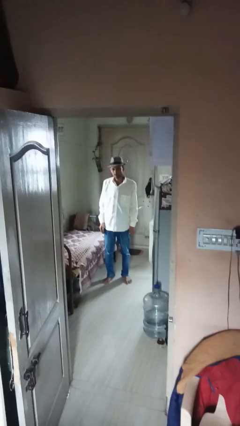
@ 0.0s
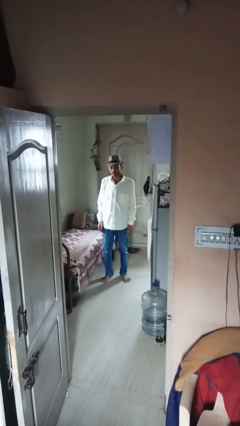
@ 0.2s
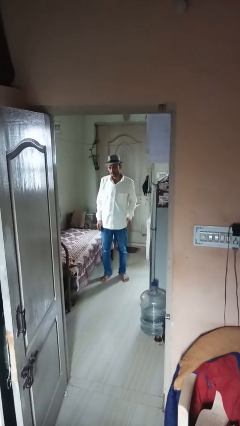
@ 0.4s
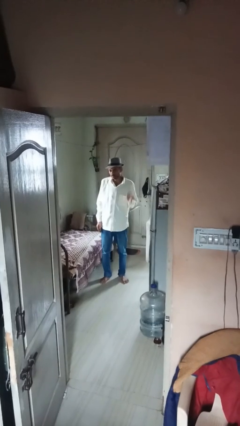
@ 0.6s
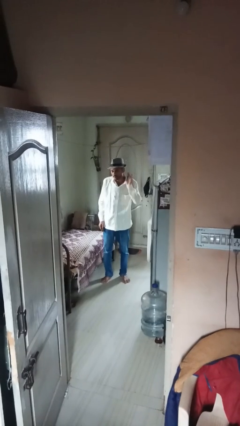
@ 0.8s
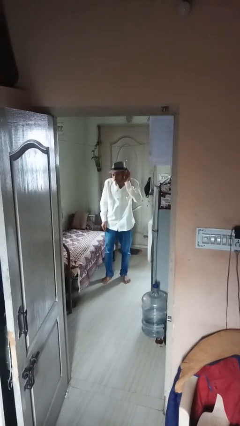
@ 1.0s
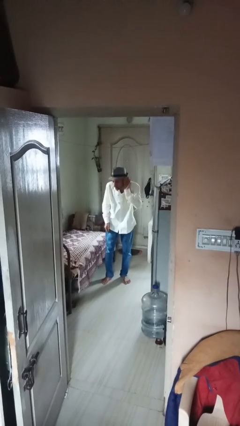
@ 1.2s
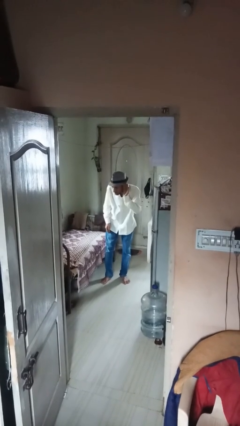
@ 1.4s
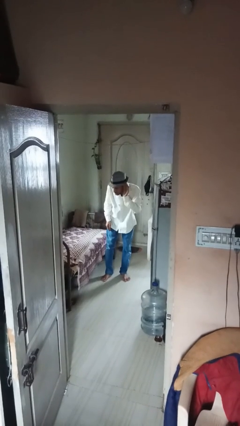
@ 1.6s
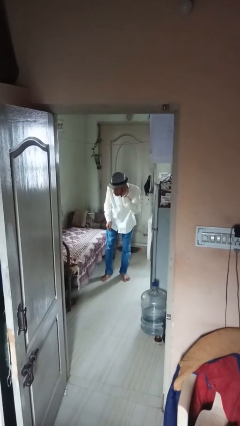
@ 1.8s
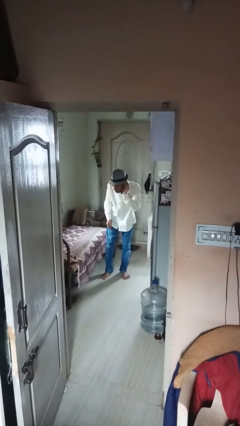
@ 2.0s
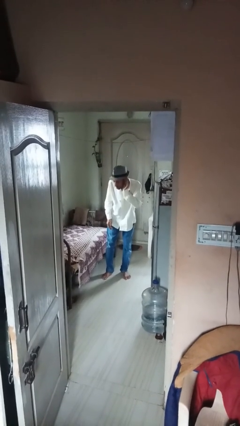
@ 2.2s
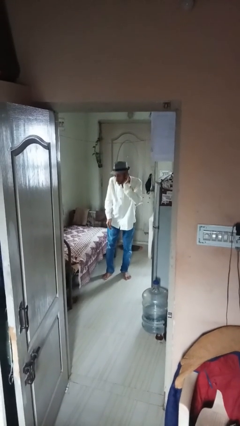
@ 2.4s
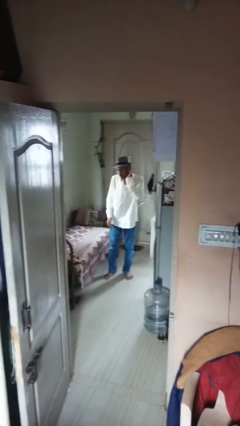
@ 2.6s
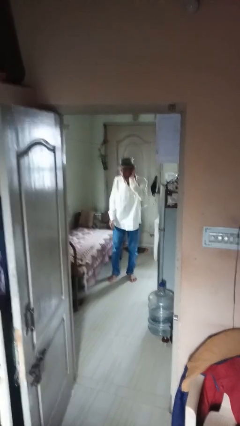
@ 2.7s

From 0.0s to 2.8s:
person gestures listen closely

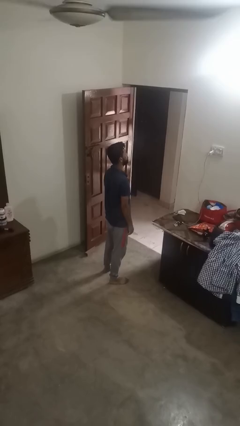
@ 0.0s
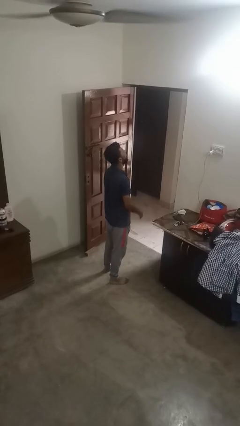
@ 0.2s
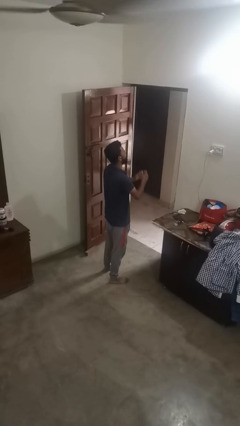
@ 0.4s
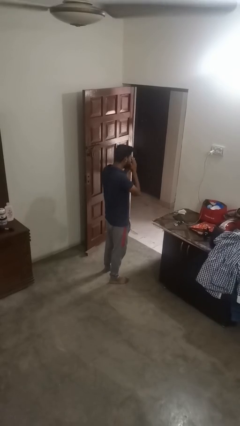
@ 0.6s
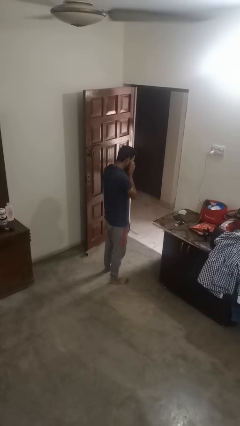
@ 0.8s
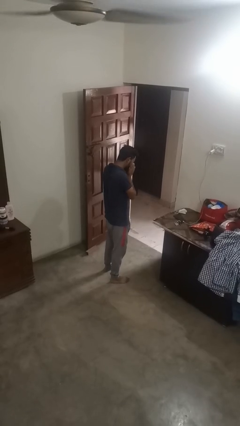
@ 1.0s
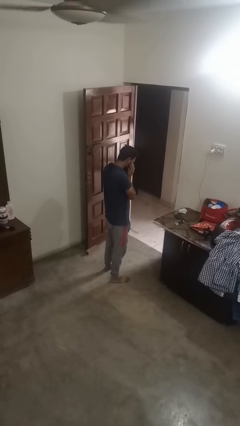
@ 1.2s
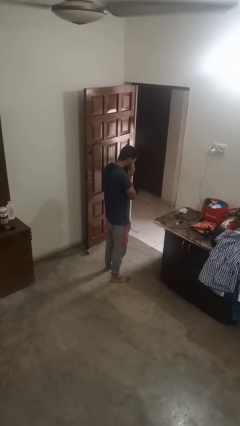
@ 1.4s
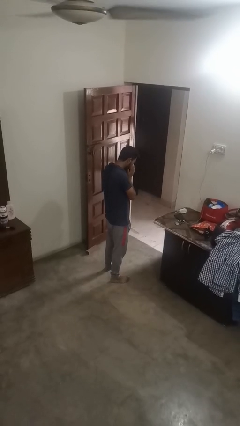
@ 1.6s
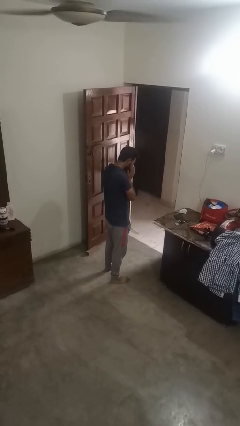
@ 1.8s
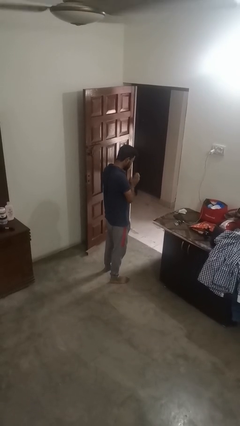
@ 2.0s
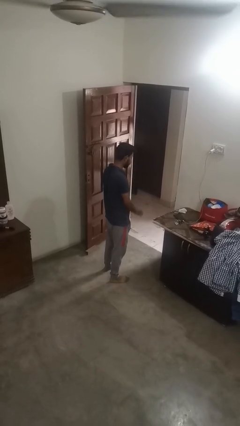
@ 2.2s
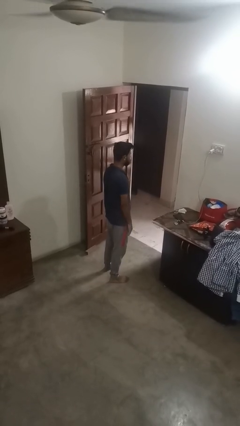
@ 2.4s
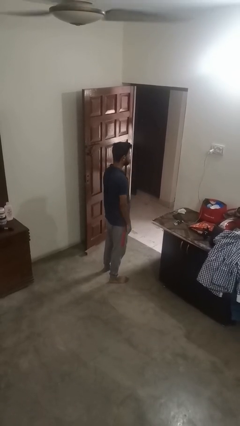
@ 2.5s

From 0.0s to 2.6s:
person sneezes into hand

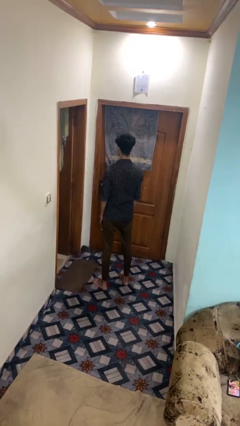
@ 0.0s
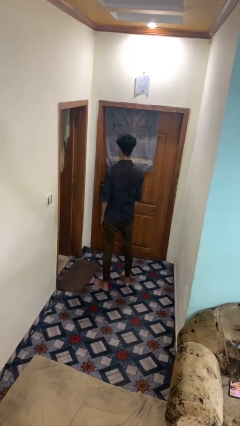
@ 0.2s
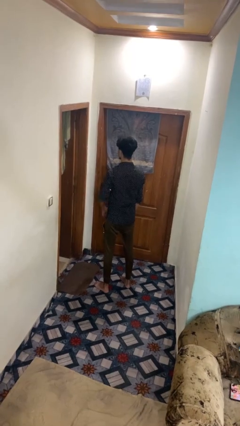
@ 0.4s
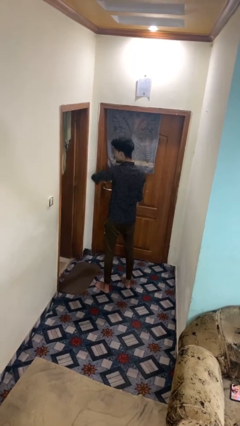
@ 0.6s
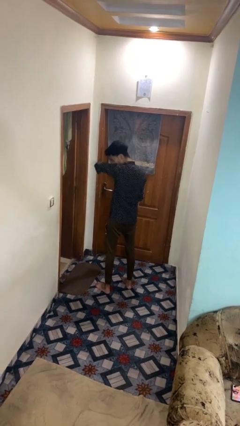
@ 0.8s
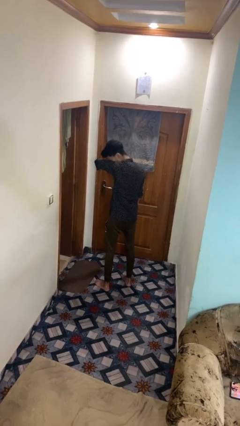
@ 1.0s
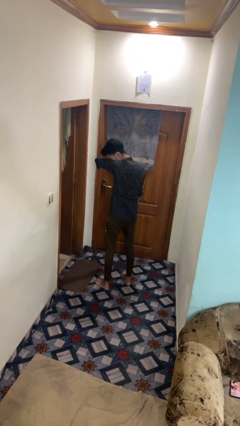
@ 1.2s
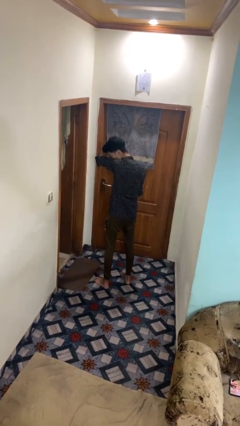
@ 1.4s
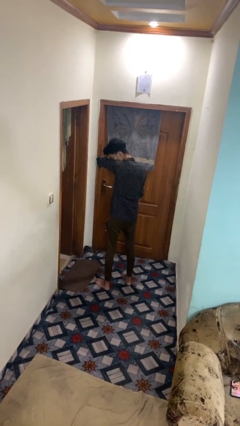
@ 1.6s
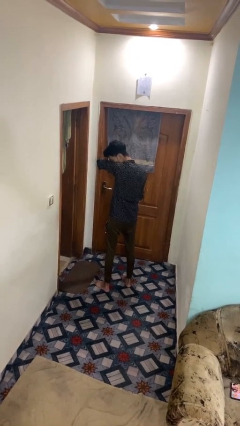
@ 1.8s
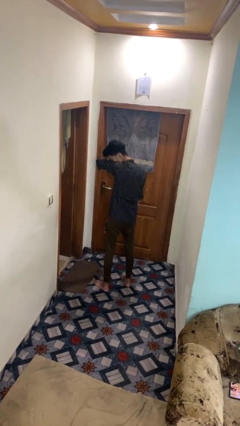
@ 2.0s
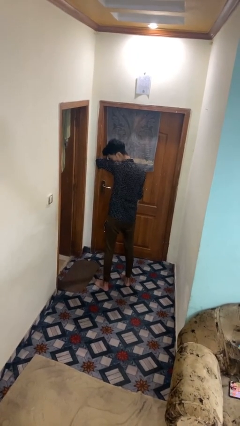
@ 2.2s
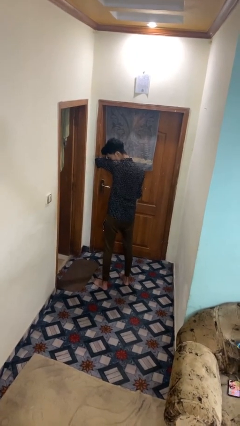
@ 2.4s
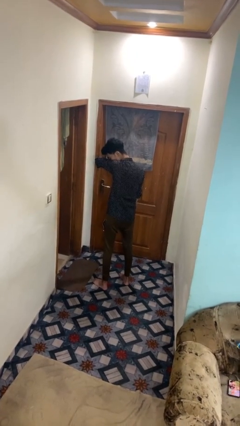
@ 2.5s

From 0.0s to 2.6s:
person sneezes into arm

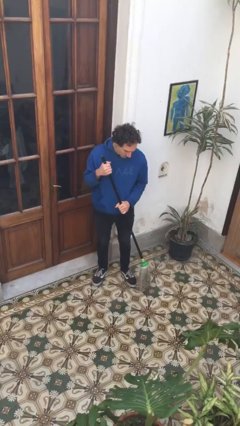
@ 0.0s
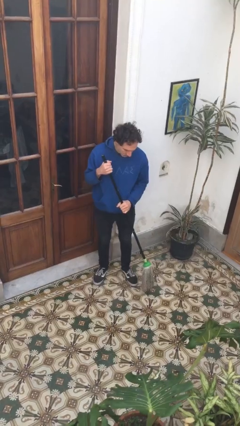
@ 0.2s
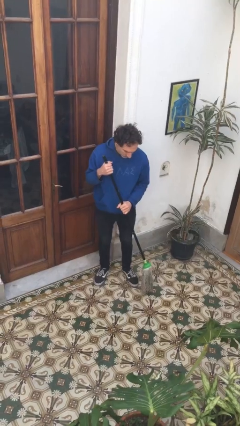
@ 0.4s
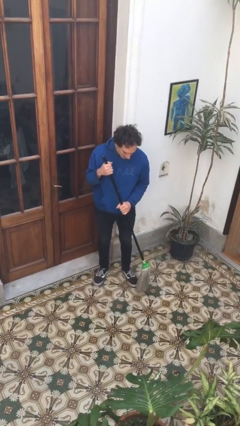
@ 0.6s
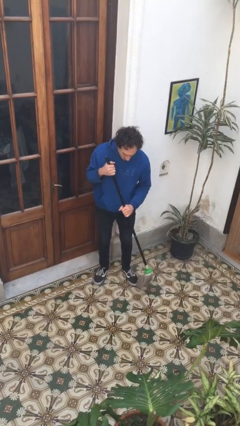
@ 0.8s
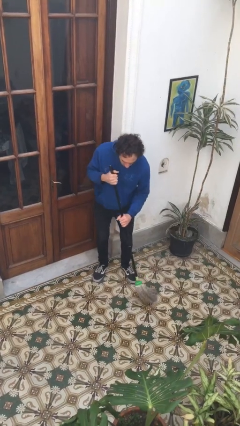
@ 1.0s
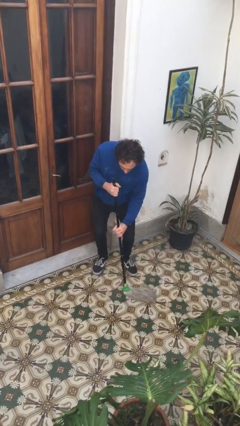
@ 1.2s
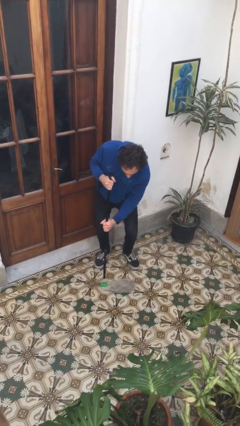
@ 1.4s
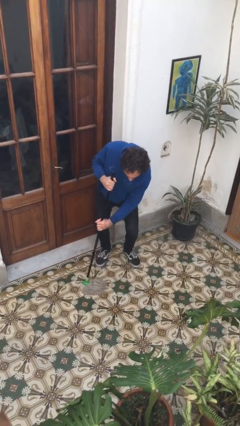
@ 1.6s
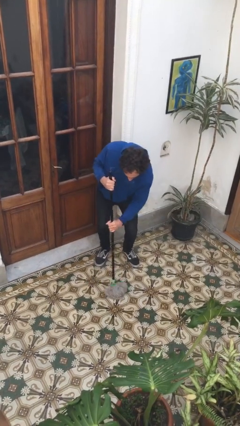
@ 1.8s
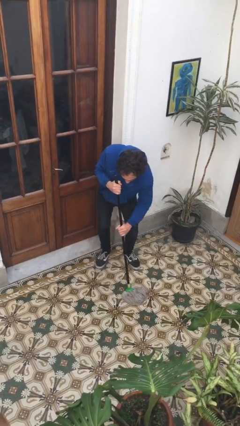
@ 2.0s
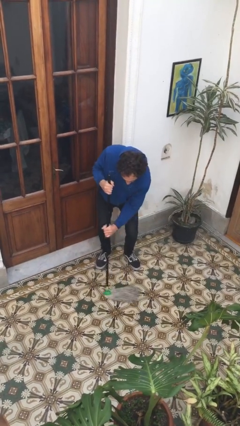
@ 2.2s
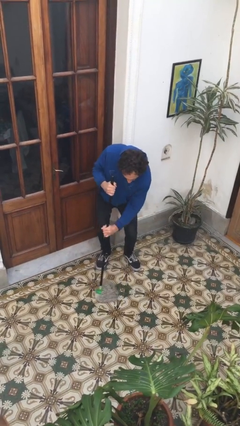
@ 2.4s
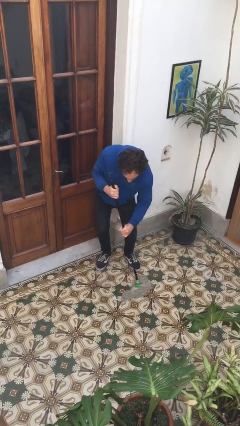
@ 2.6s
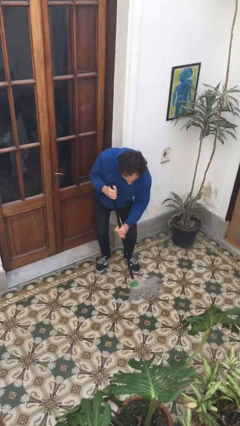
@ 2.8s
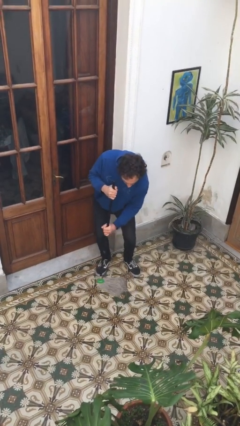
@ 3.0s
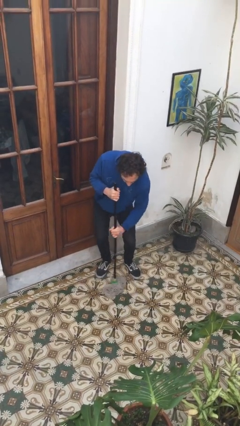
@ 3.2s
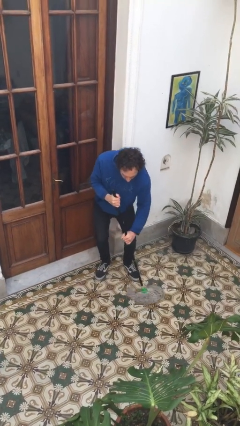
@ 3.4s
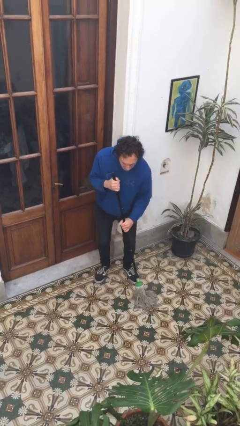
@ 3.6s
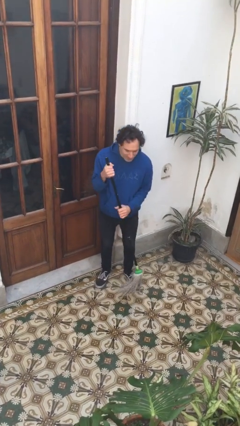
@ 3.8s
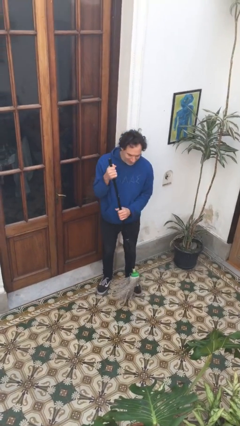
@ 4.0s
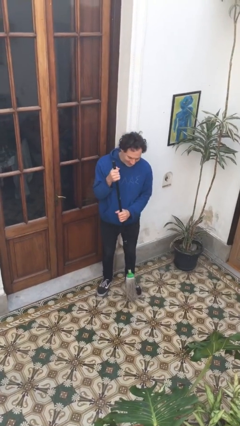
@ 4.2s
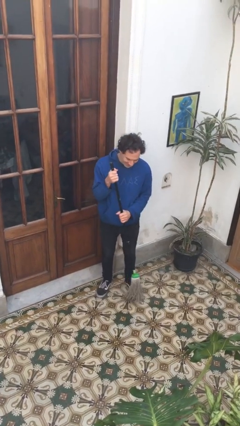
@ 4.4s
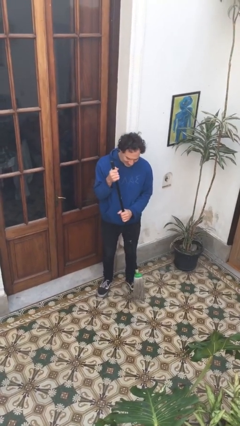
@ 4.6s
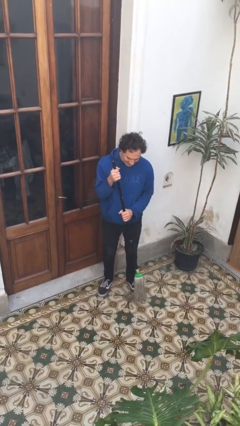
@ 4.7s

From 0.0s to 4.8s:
person mops

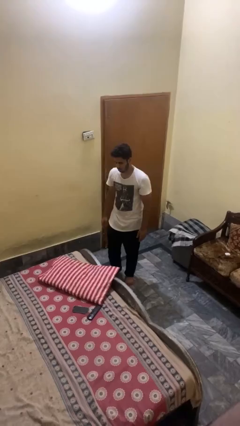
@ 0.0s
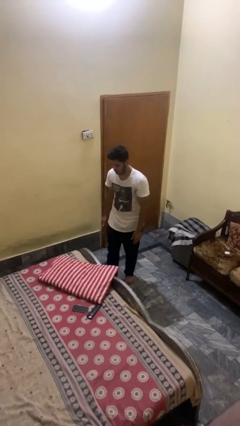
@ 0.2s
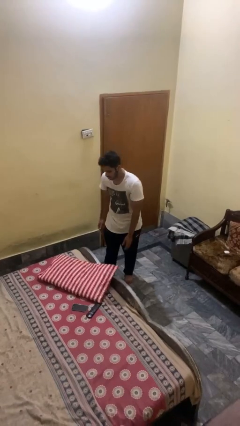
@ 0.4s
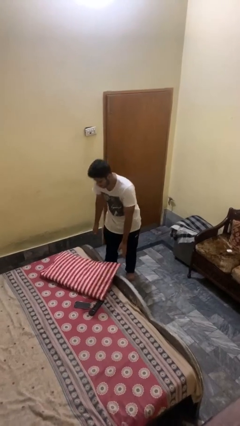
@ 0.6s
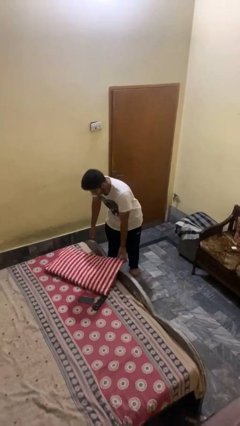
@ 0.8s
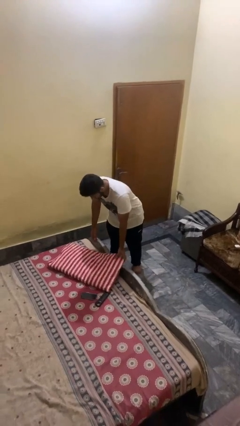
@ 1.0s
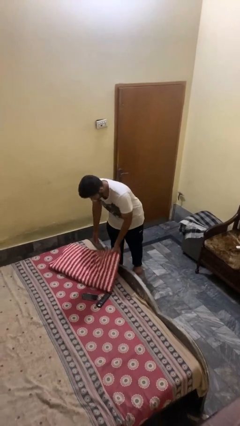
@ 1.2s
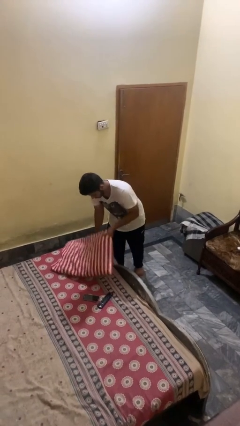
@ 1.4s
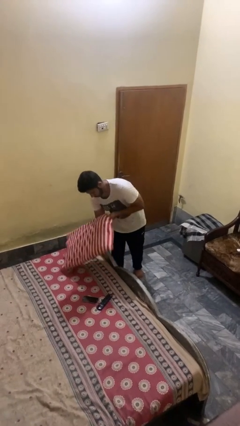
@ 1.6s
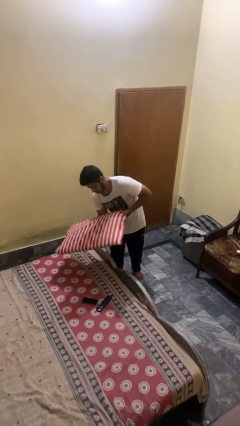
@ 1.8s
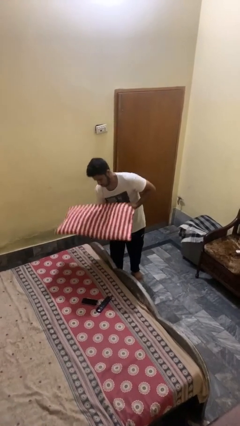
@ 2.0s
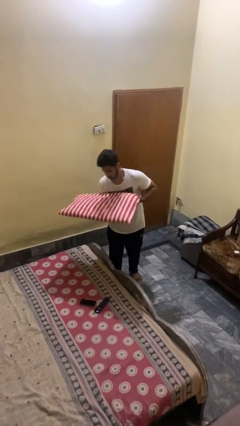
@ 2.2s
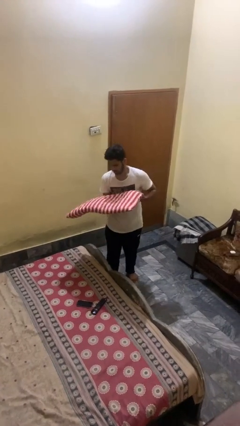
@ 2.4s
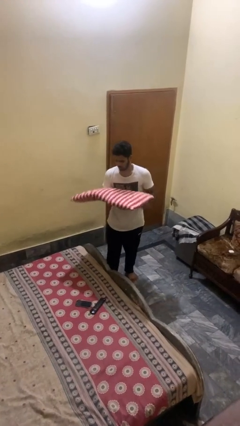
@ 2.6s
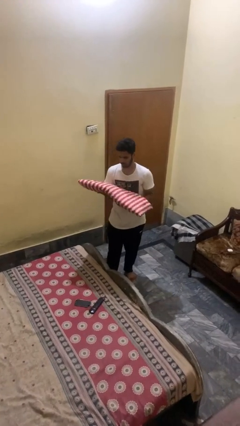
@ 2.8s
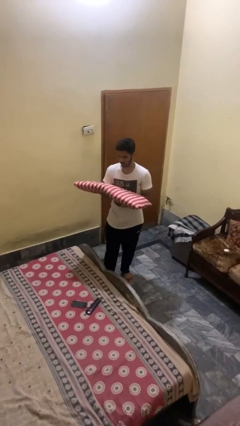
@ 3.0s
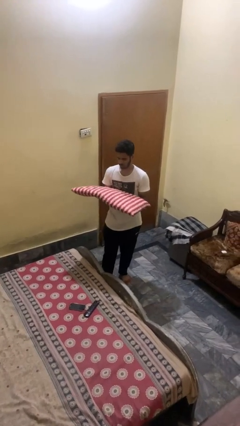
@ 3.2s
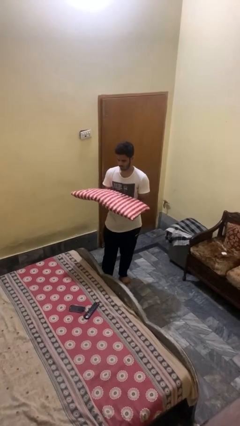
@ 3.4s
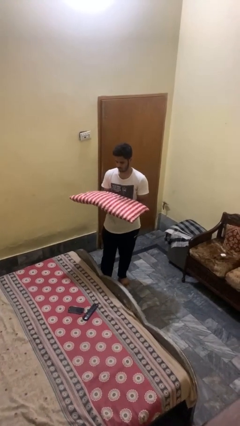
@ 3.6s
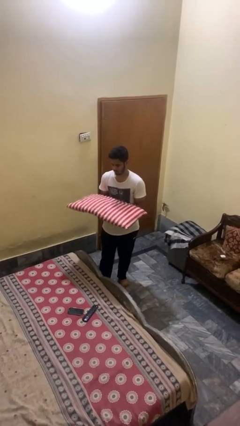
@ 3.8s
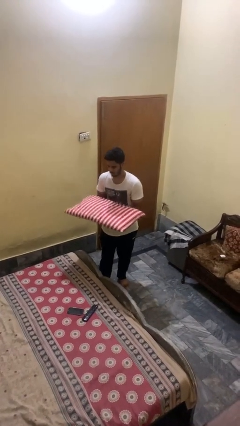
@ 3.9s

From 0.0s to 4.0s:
person picks up object from bed

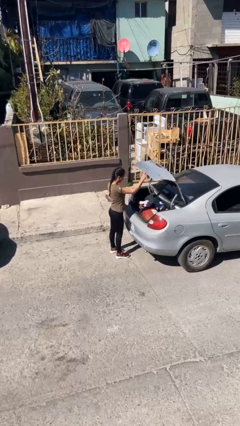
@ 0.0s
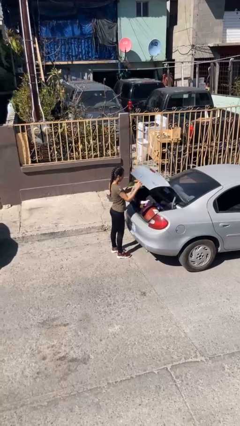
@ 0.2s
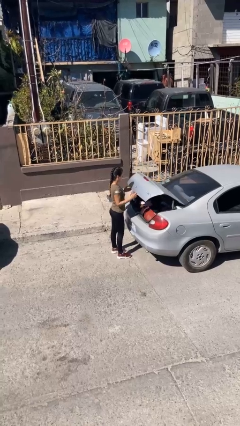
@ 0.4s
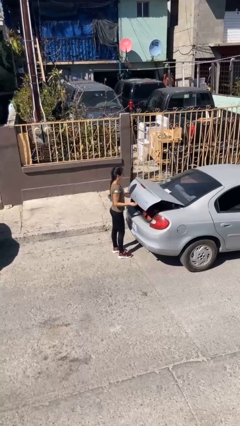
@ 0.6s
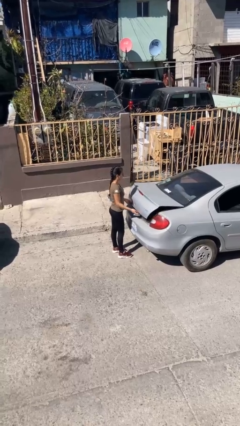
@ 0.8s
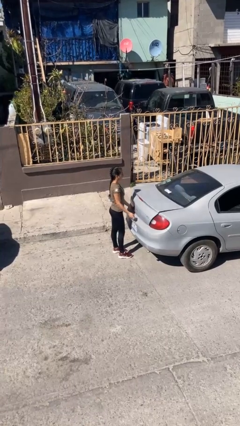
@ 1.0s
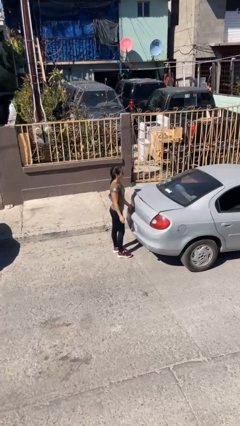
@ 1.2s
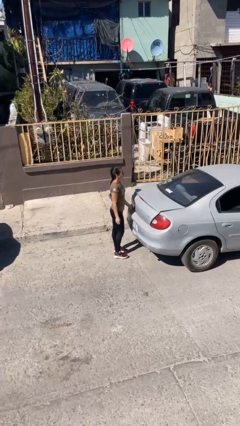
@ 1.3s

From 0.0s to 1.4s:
person closes car trunk
